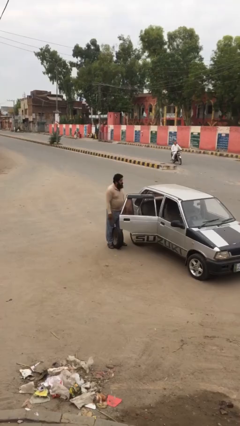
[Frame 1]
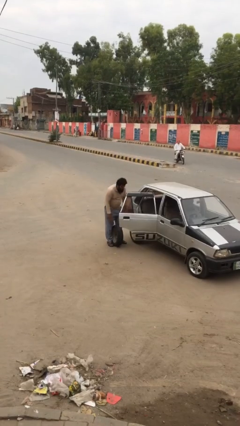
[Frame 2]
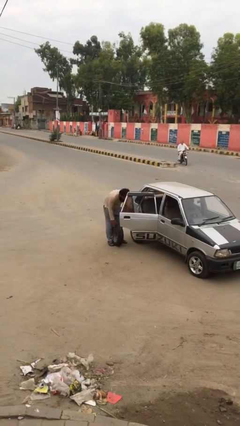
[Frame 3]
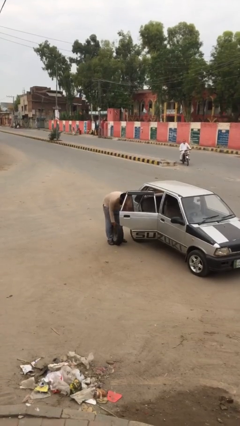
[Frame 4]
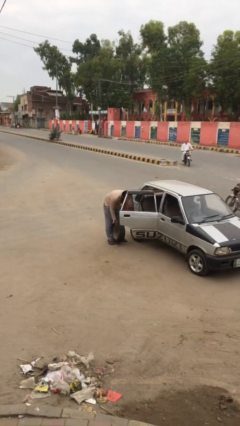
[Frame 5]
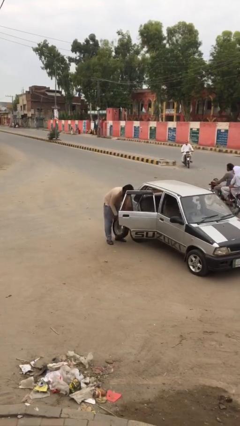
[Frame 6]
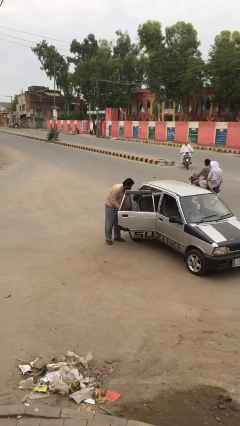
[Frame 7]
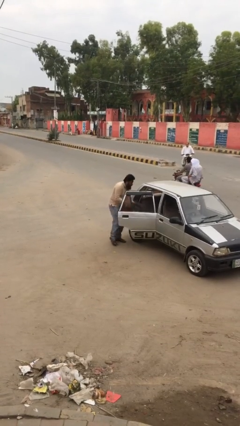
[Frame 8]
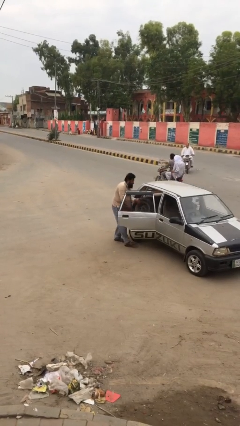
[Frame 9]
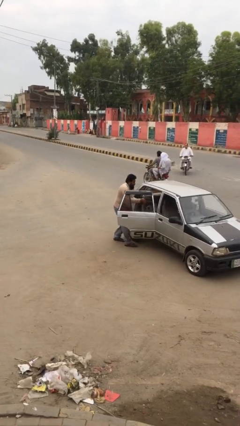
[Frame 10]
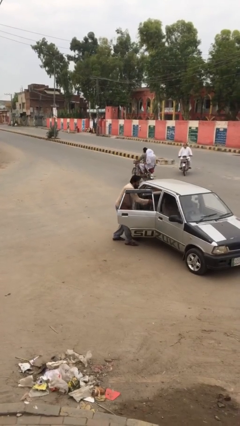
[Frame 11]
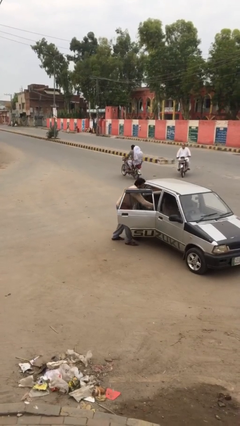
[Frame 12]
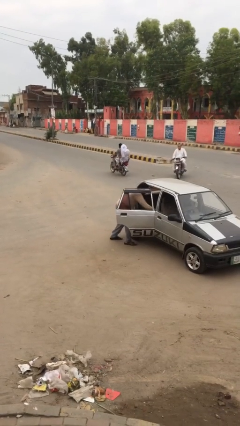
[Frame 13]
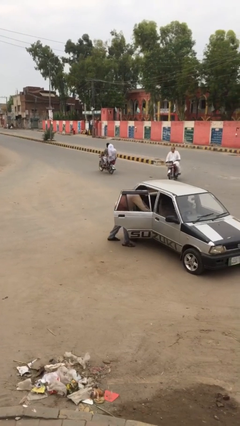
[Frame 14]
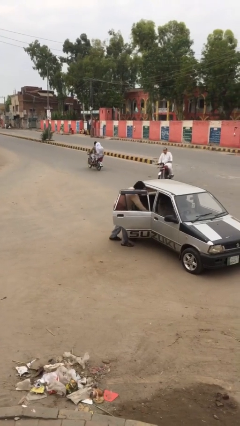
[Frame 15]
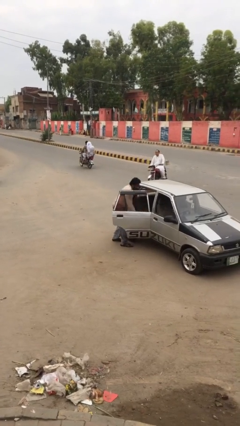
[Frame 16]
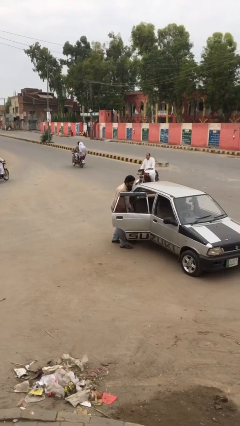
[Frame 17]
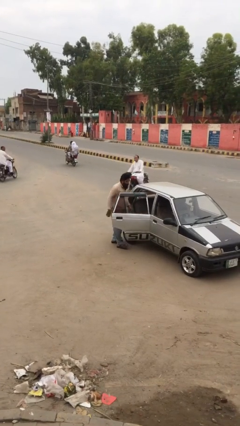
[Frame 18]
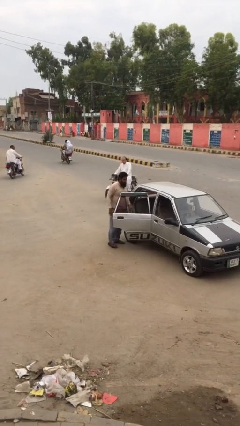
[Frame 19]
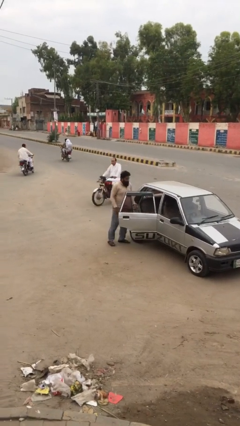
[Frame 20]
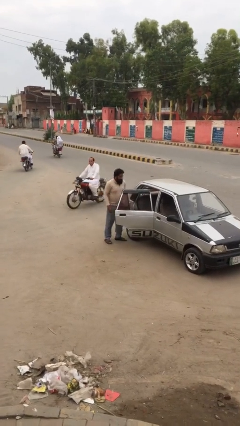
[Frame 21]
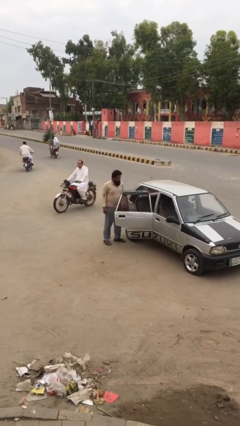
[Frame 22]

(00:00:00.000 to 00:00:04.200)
person loads car

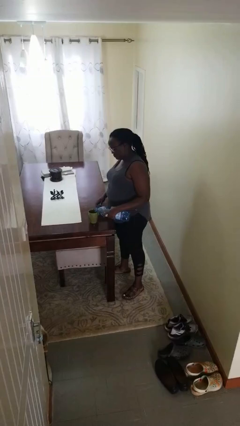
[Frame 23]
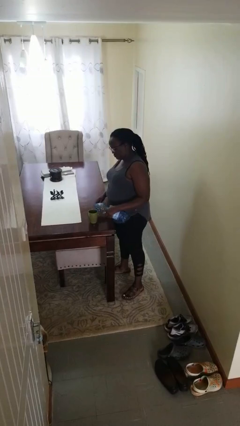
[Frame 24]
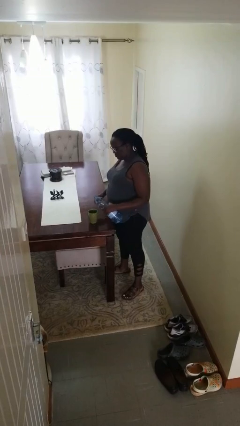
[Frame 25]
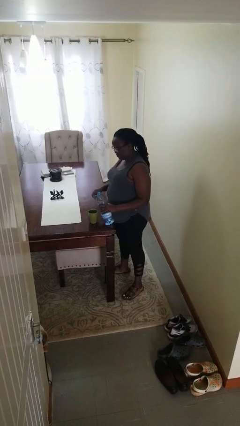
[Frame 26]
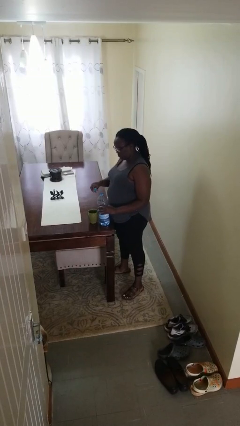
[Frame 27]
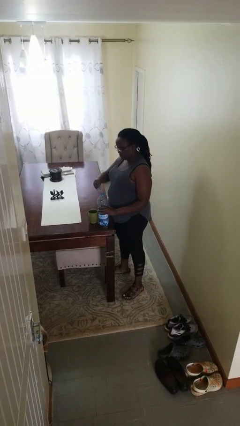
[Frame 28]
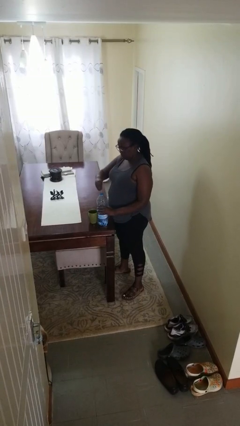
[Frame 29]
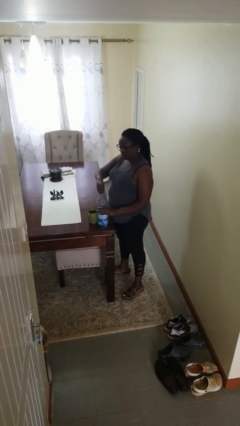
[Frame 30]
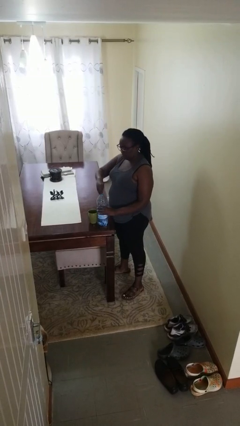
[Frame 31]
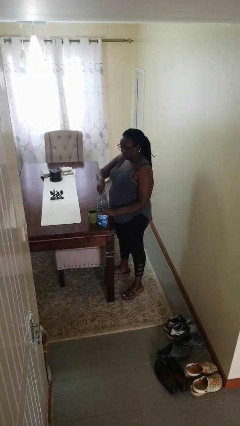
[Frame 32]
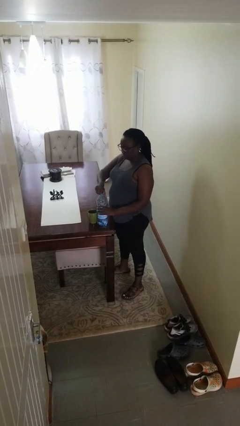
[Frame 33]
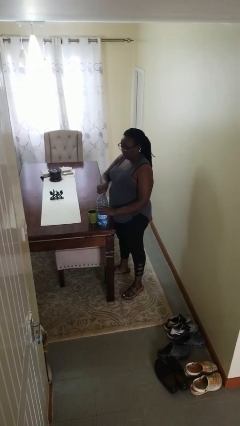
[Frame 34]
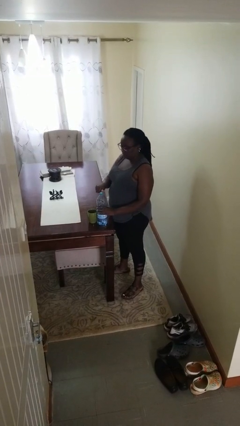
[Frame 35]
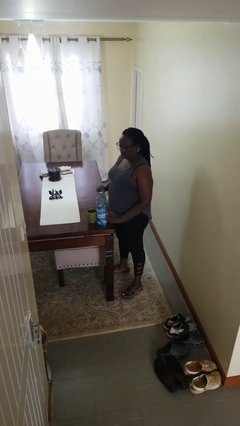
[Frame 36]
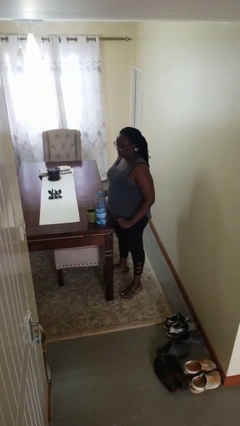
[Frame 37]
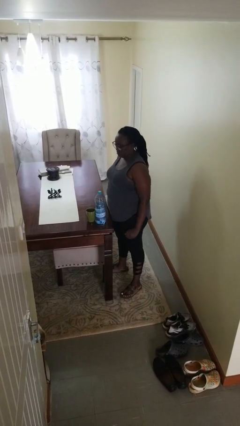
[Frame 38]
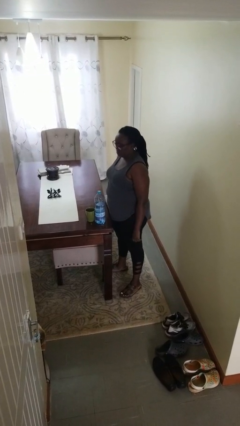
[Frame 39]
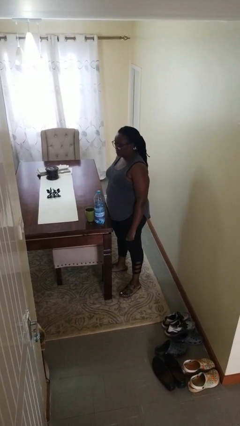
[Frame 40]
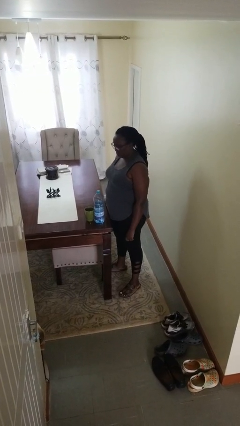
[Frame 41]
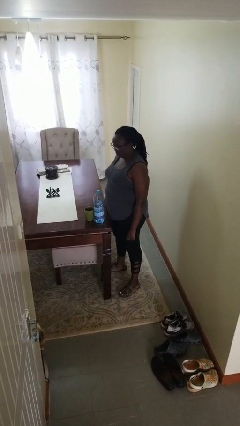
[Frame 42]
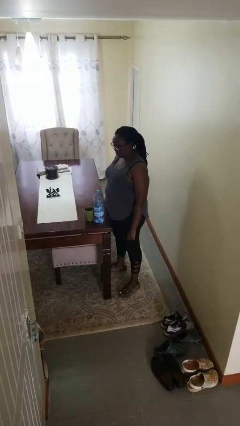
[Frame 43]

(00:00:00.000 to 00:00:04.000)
person screws lid to bottle

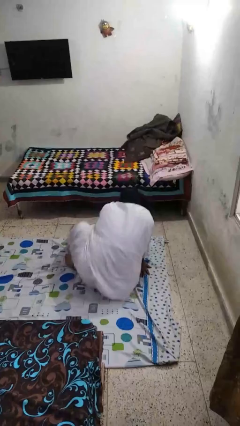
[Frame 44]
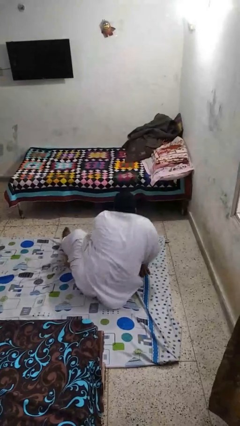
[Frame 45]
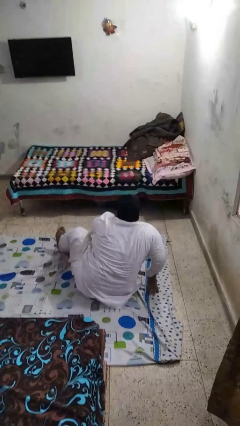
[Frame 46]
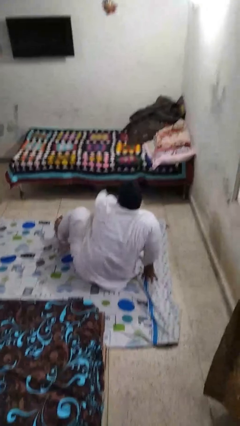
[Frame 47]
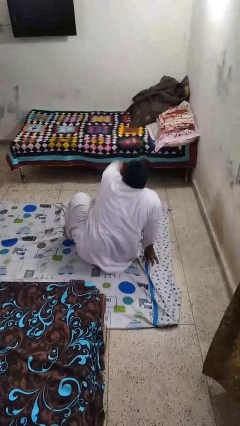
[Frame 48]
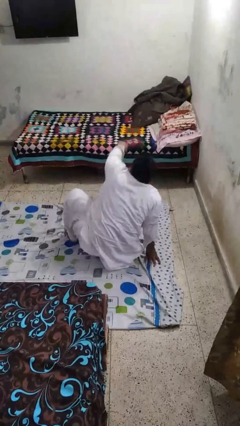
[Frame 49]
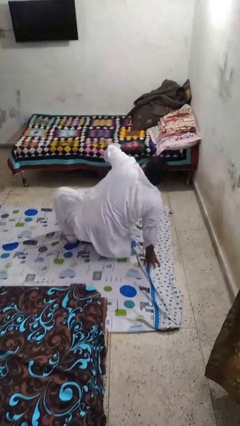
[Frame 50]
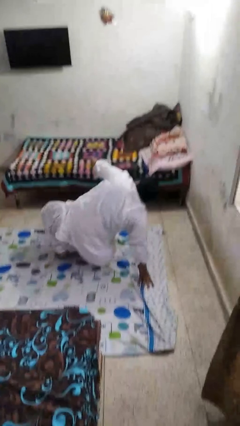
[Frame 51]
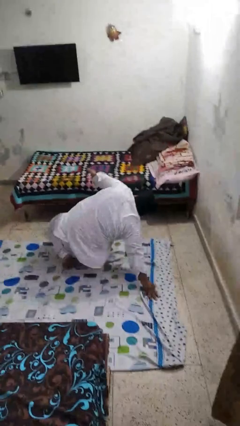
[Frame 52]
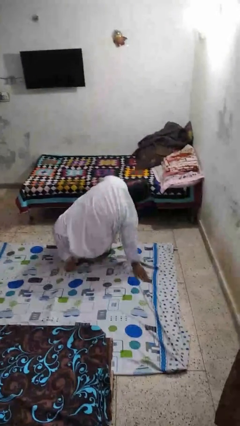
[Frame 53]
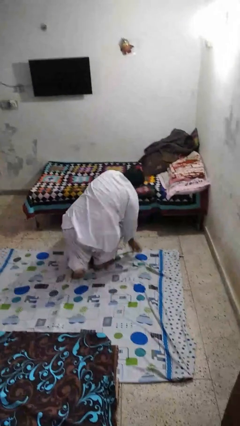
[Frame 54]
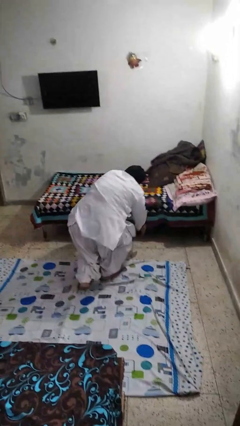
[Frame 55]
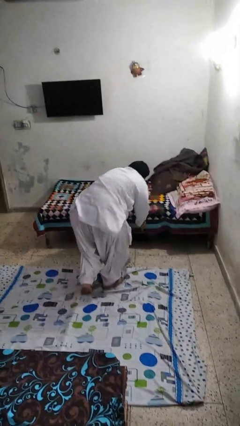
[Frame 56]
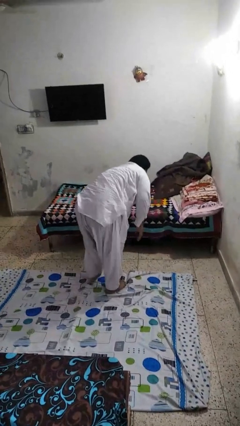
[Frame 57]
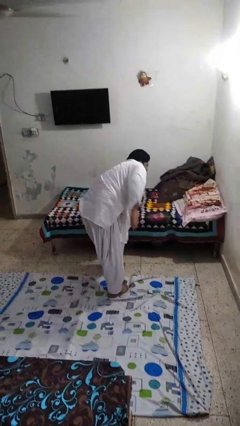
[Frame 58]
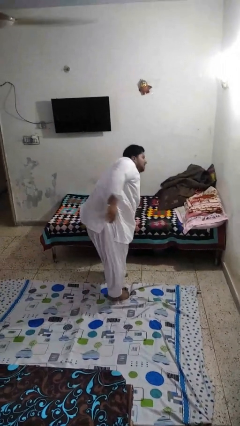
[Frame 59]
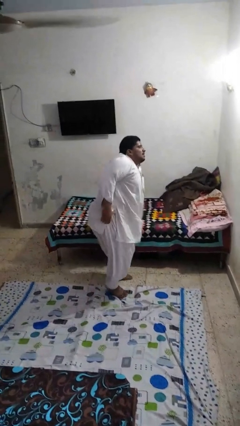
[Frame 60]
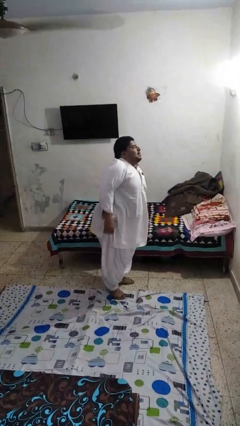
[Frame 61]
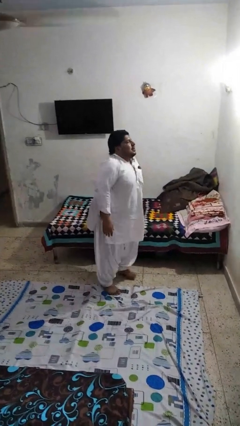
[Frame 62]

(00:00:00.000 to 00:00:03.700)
person stands up from floor

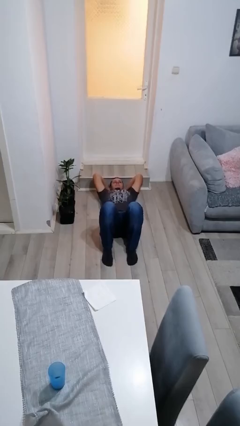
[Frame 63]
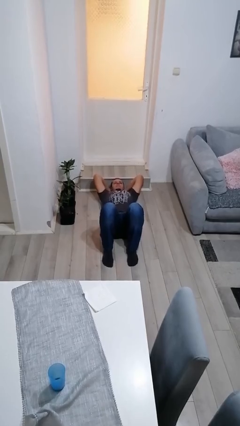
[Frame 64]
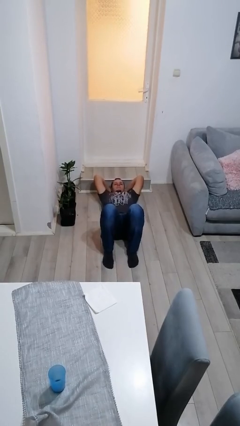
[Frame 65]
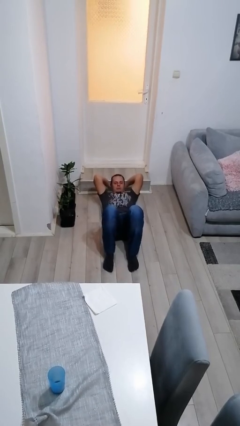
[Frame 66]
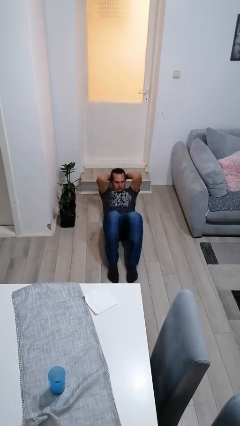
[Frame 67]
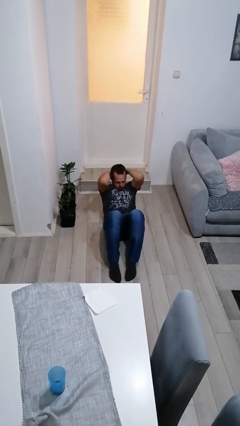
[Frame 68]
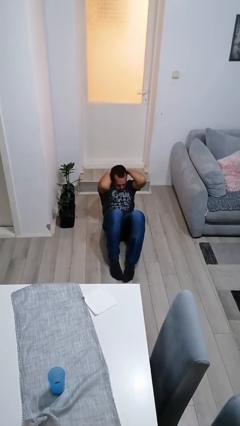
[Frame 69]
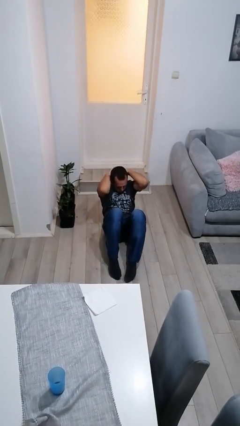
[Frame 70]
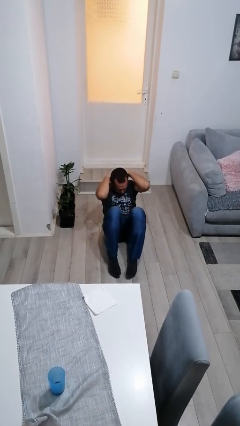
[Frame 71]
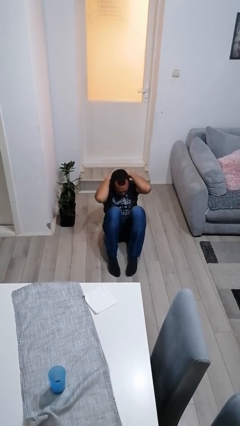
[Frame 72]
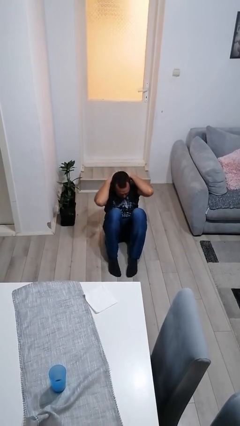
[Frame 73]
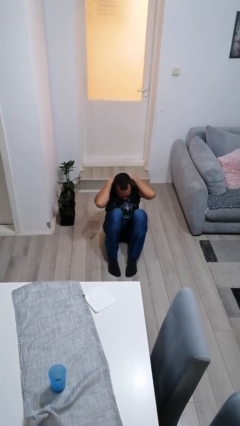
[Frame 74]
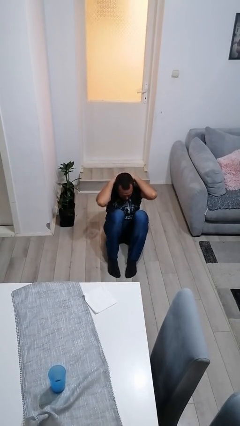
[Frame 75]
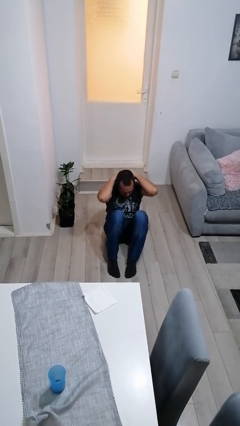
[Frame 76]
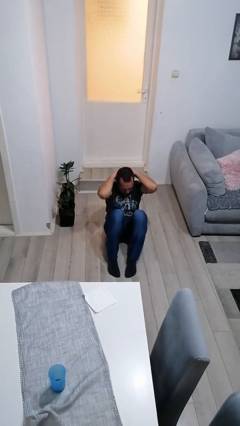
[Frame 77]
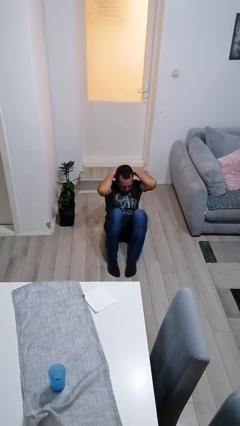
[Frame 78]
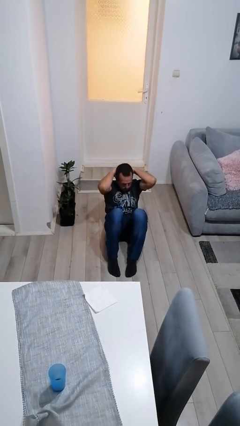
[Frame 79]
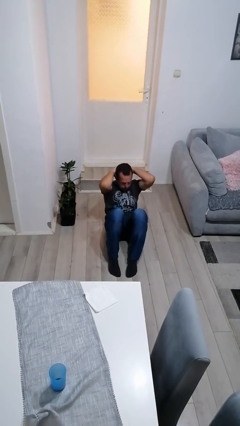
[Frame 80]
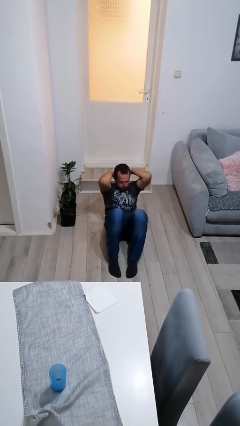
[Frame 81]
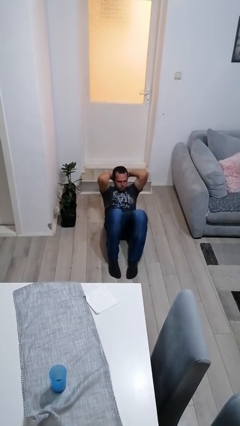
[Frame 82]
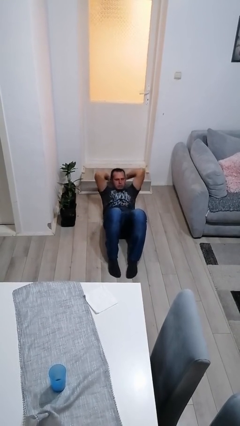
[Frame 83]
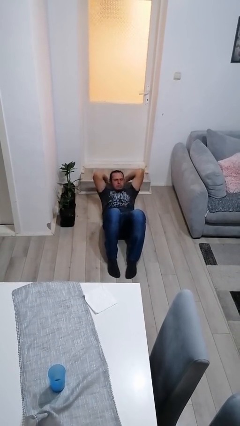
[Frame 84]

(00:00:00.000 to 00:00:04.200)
person exercises with situp

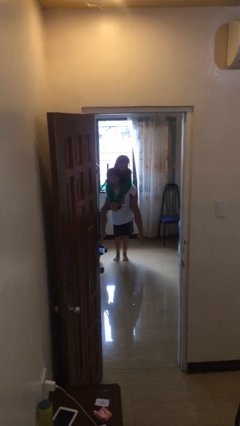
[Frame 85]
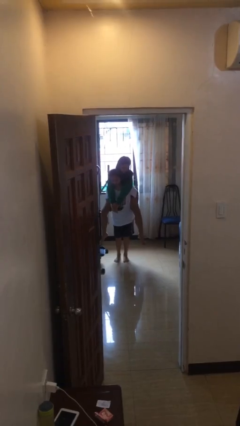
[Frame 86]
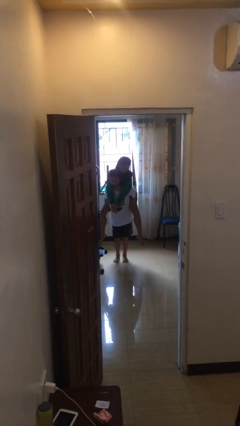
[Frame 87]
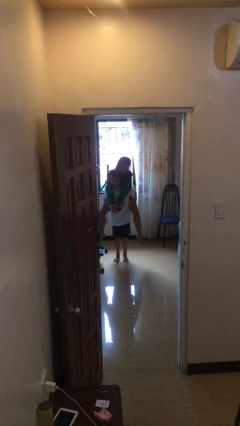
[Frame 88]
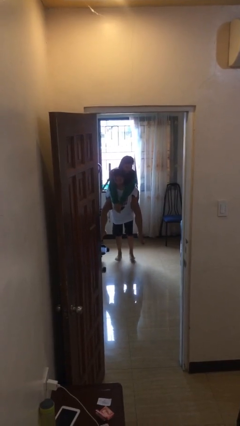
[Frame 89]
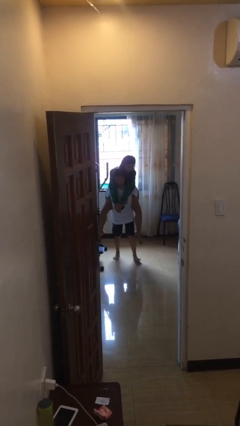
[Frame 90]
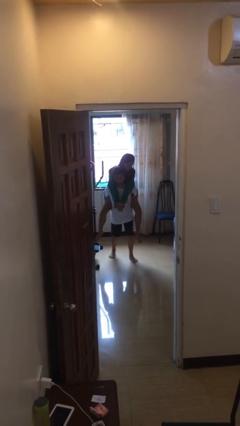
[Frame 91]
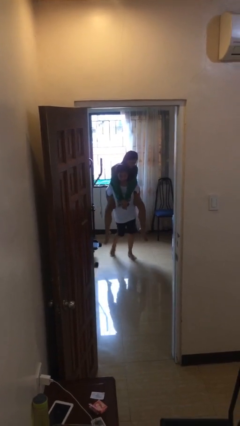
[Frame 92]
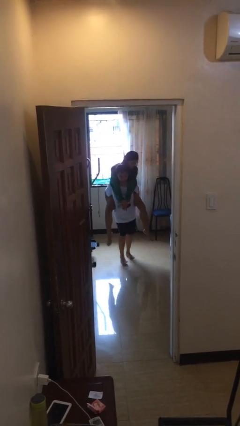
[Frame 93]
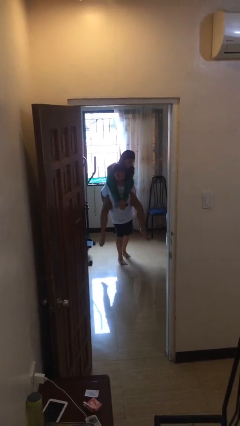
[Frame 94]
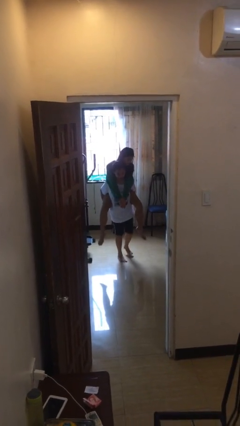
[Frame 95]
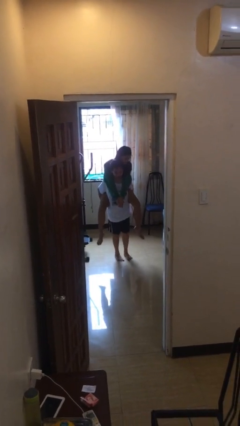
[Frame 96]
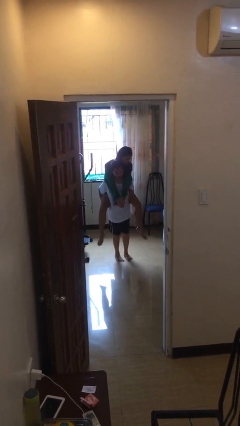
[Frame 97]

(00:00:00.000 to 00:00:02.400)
person carries person on shoulders
